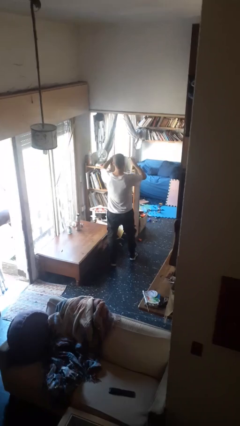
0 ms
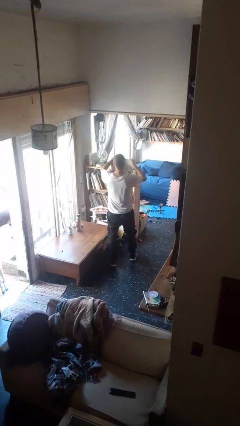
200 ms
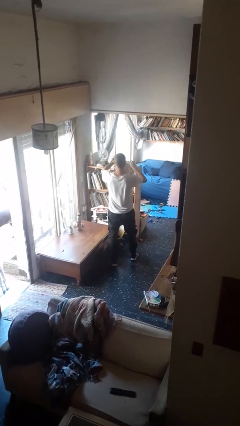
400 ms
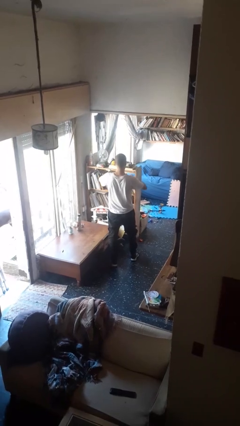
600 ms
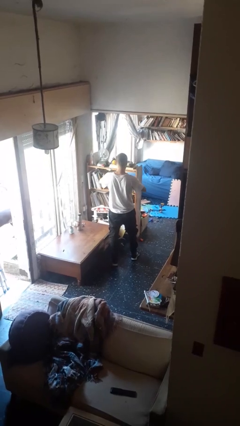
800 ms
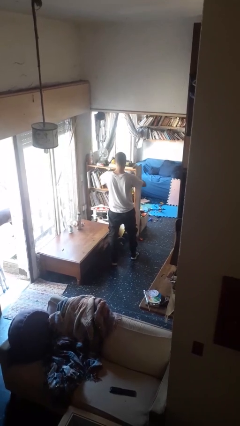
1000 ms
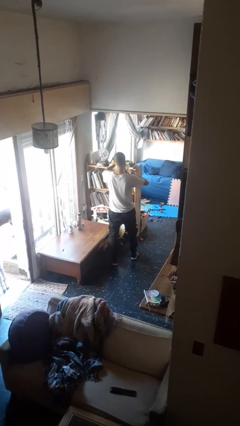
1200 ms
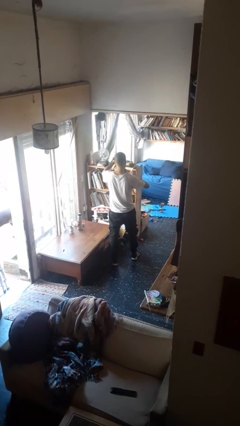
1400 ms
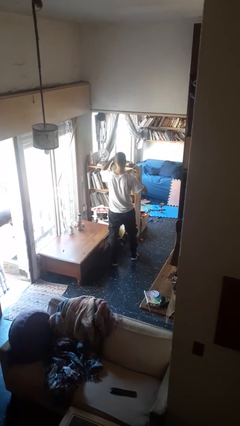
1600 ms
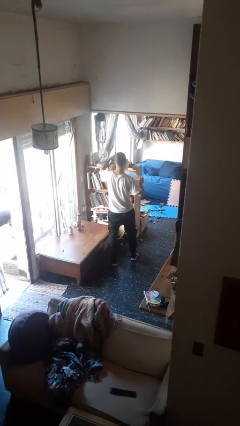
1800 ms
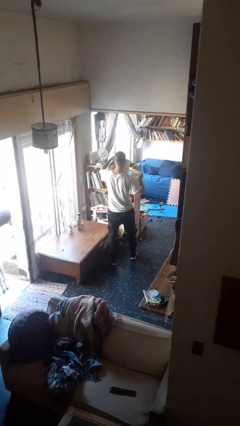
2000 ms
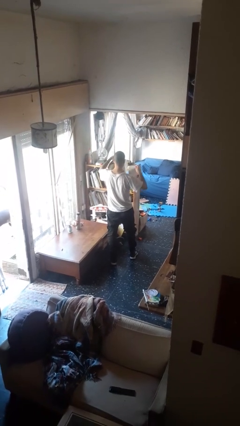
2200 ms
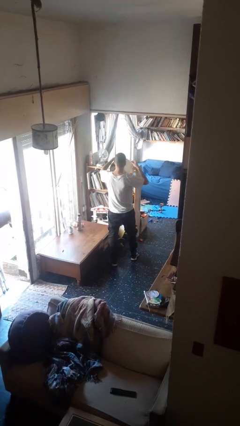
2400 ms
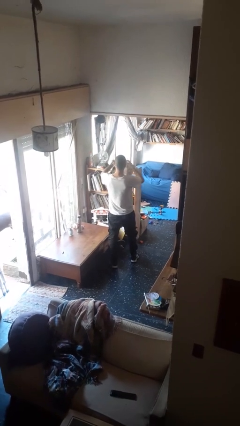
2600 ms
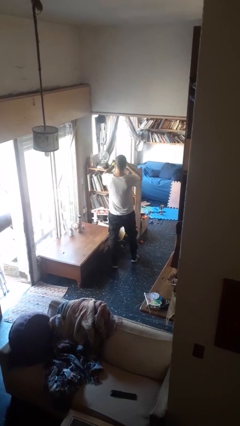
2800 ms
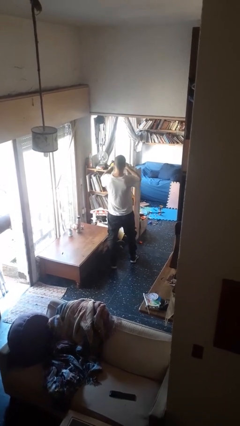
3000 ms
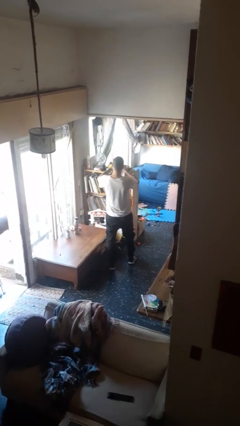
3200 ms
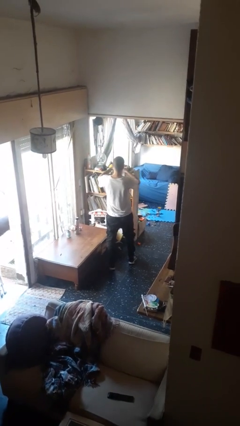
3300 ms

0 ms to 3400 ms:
person tears paper

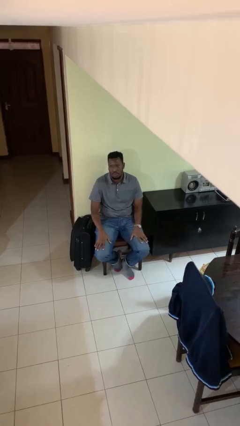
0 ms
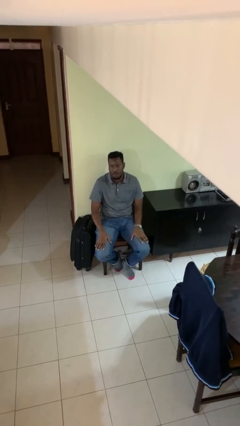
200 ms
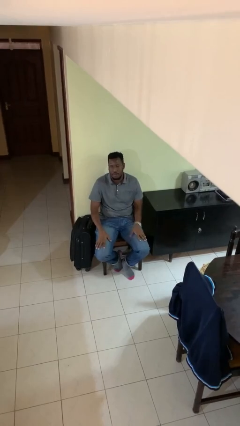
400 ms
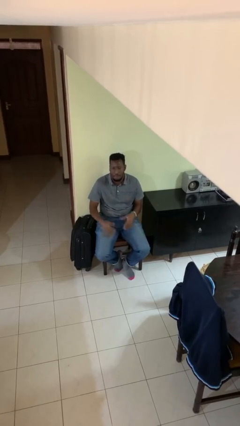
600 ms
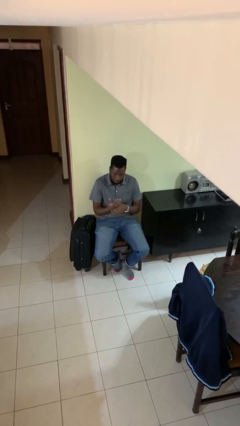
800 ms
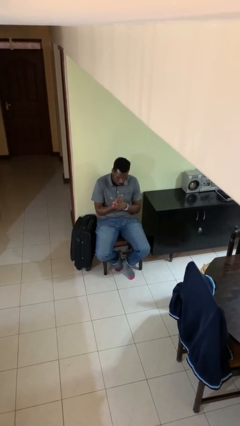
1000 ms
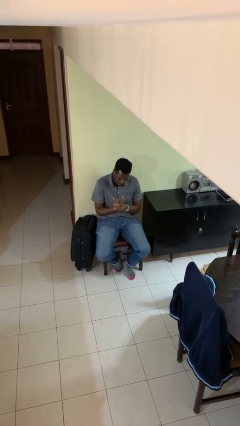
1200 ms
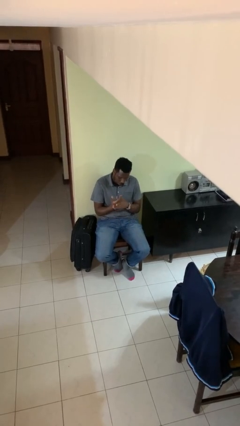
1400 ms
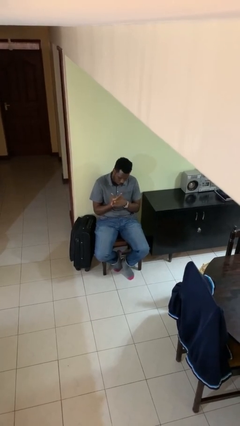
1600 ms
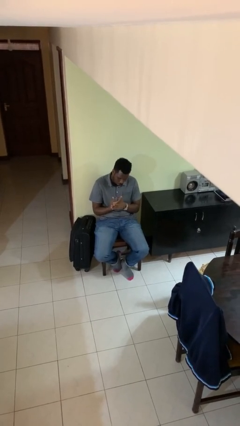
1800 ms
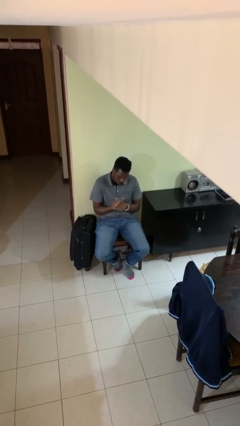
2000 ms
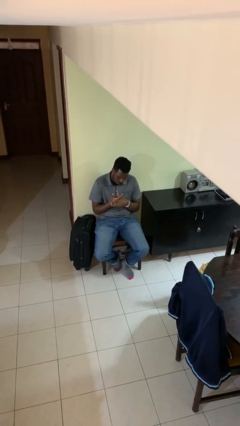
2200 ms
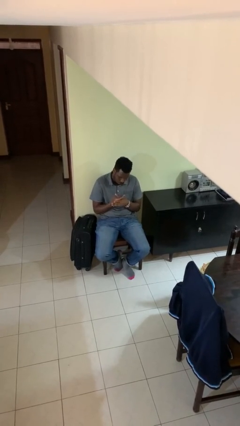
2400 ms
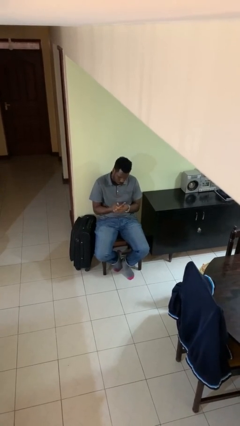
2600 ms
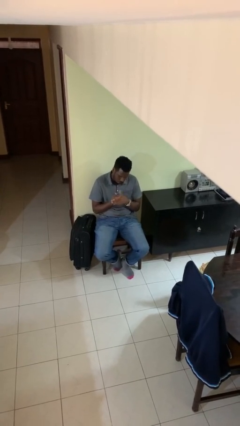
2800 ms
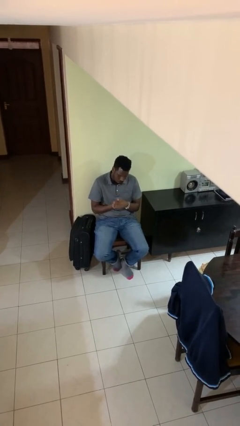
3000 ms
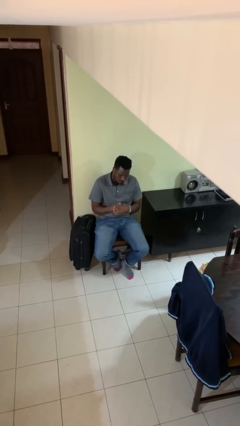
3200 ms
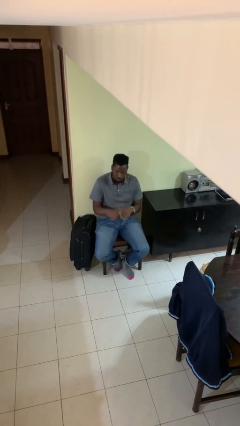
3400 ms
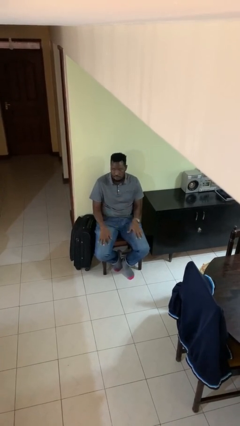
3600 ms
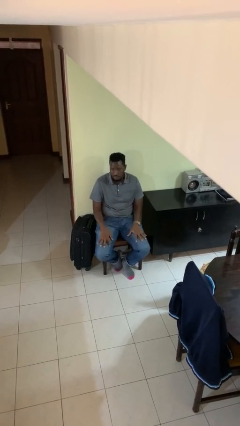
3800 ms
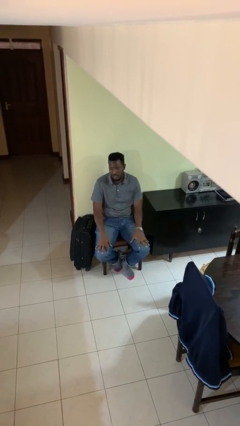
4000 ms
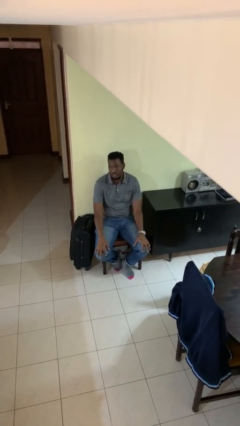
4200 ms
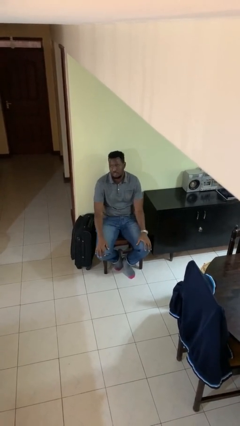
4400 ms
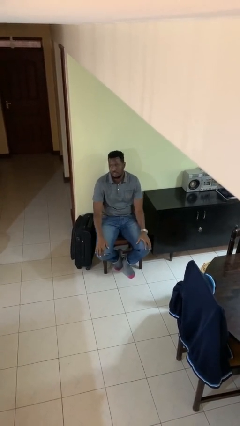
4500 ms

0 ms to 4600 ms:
person cracks knuckles

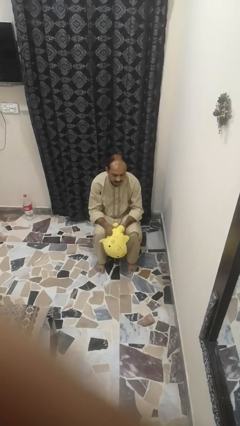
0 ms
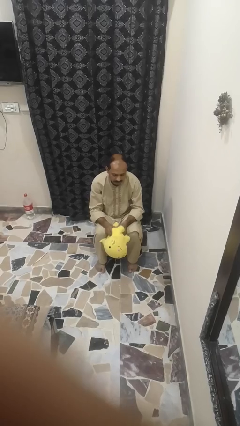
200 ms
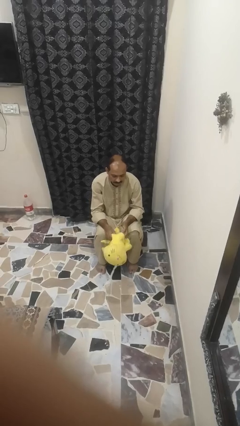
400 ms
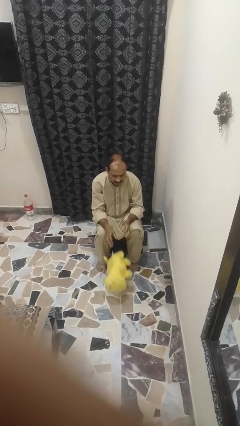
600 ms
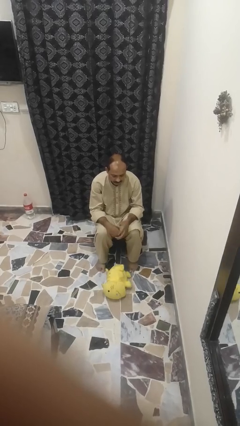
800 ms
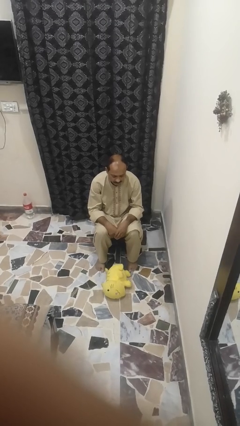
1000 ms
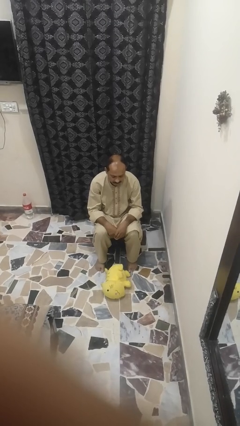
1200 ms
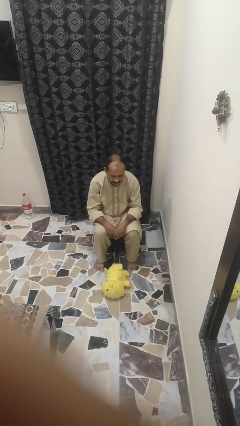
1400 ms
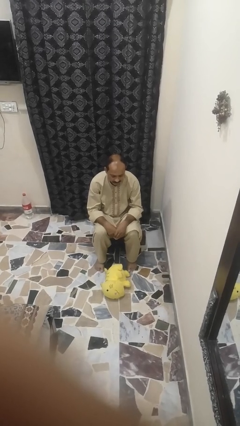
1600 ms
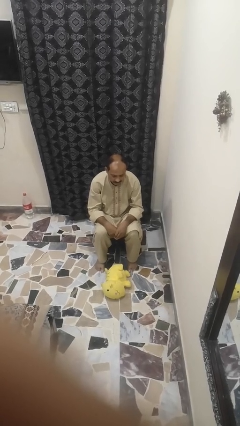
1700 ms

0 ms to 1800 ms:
person drops object

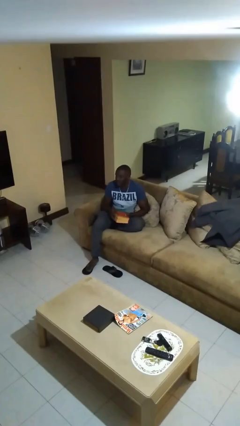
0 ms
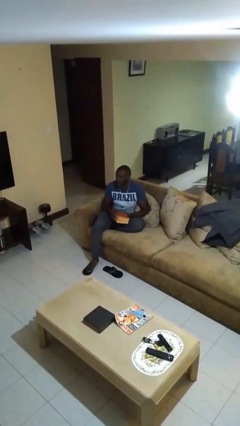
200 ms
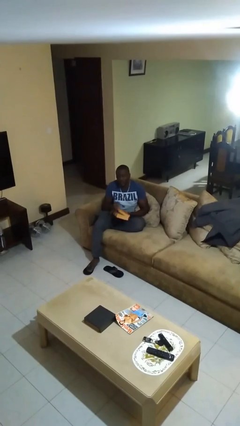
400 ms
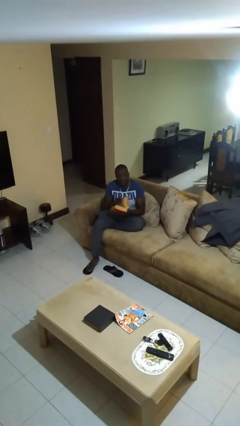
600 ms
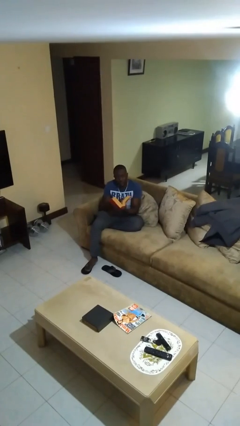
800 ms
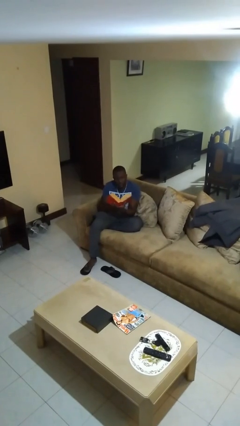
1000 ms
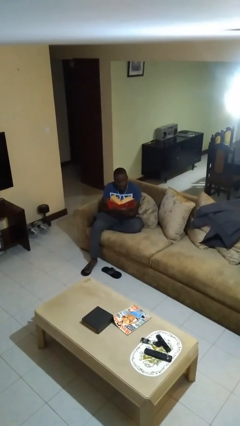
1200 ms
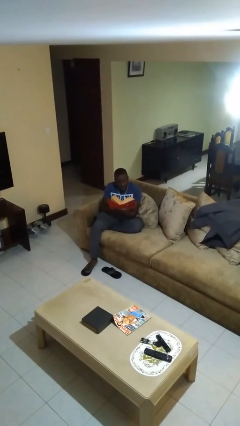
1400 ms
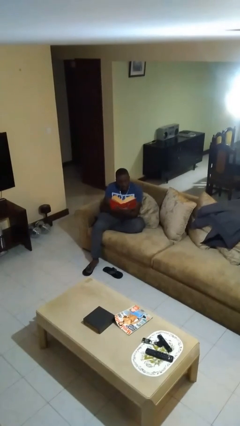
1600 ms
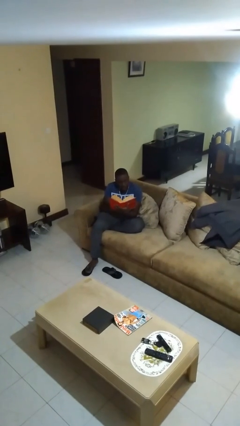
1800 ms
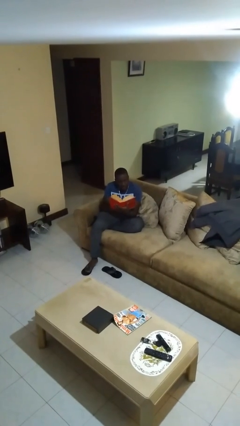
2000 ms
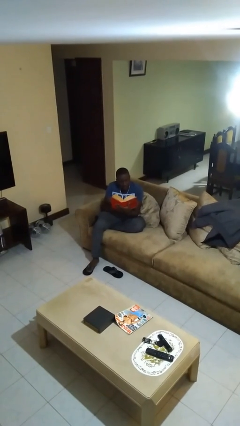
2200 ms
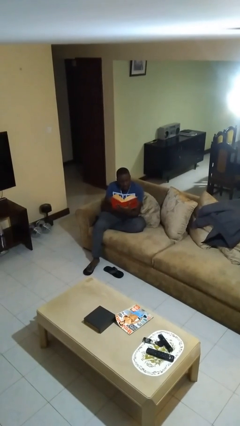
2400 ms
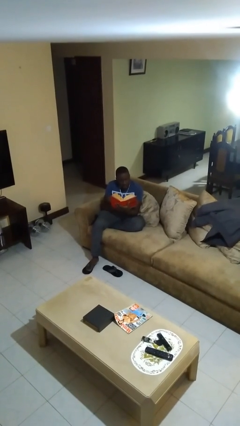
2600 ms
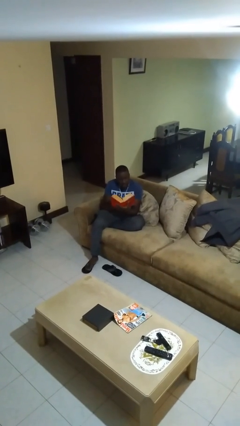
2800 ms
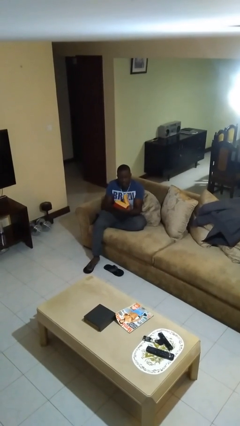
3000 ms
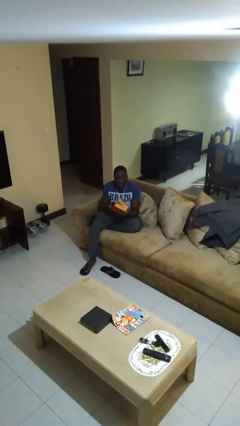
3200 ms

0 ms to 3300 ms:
person reads book

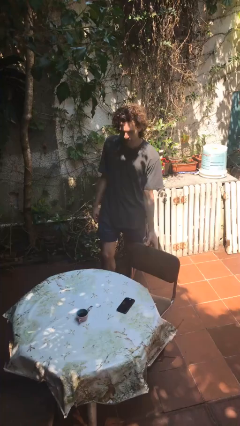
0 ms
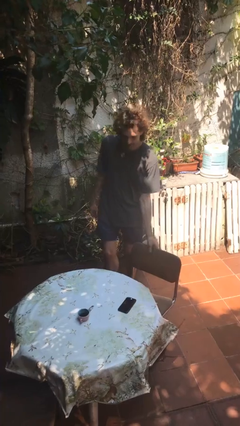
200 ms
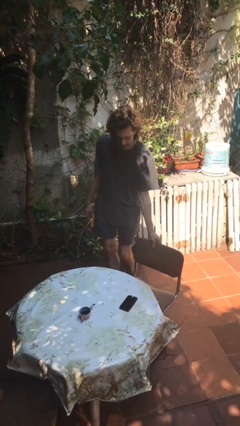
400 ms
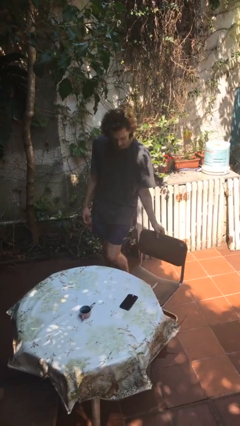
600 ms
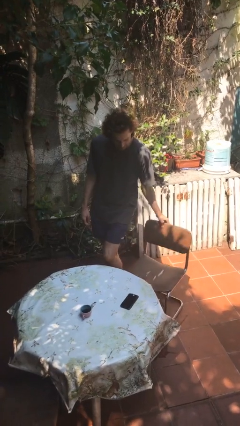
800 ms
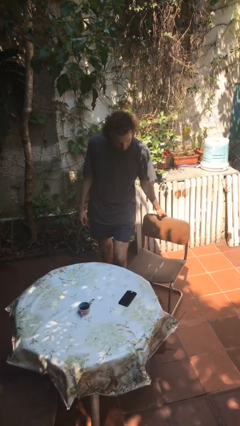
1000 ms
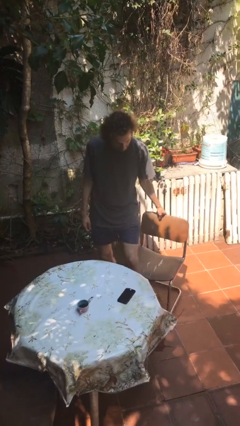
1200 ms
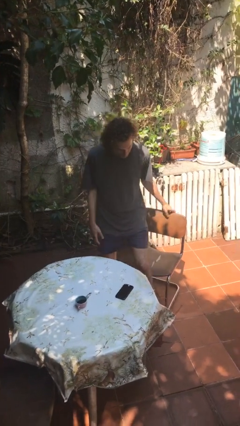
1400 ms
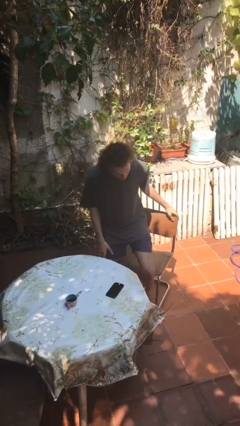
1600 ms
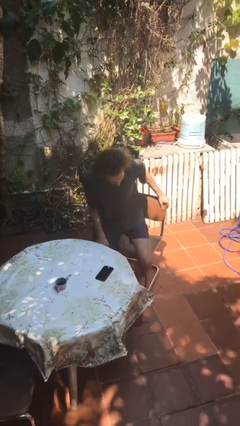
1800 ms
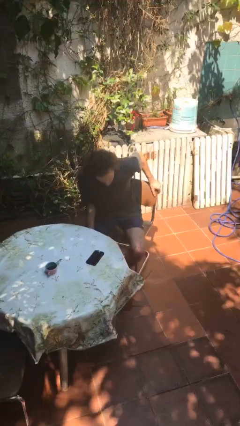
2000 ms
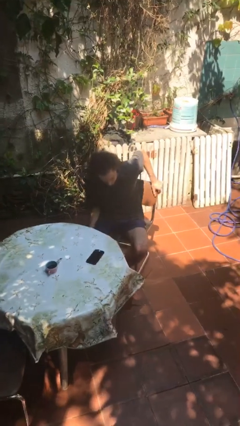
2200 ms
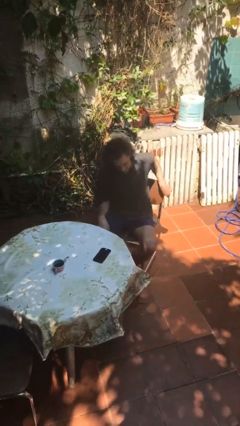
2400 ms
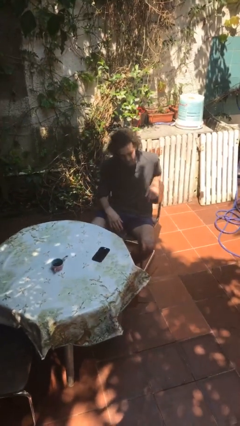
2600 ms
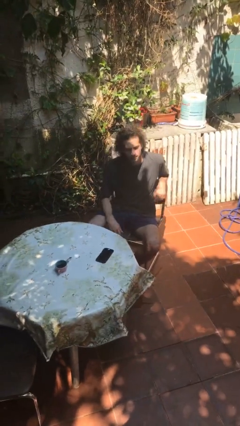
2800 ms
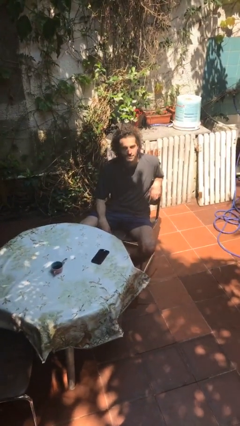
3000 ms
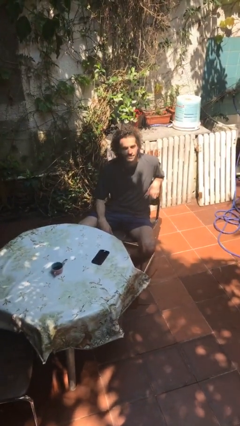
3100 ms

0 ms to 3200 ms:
person sits down

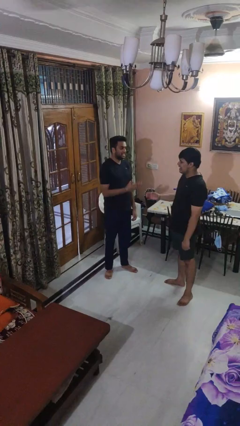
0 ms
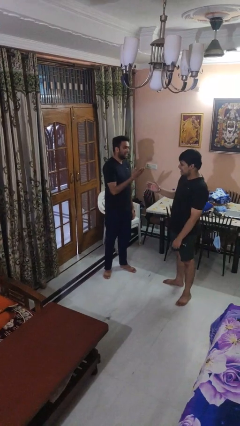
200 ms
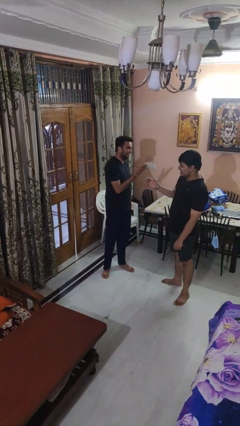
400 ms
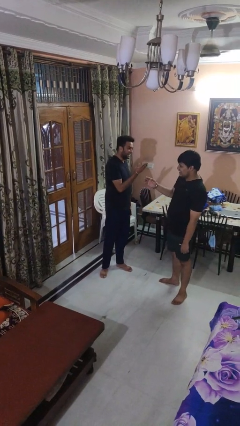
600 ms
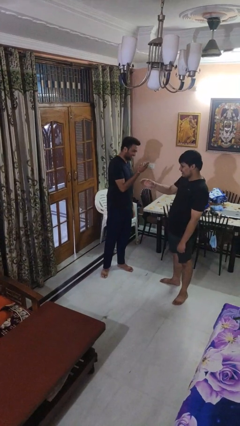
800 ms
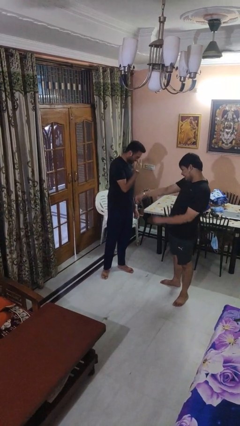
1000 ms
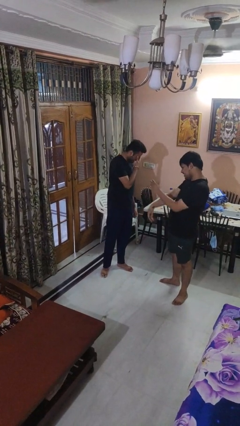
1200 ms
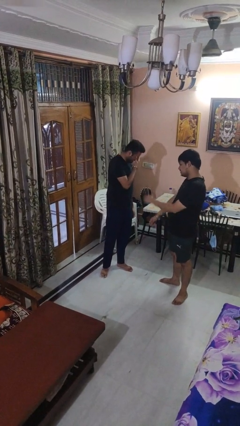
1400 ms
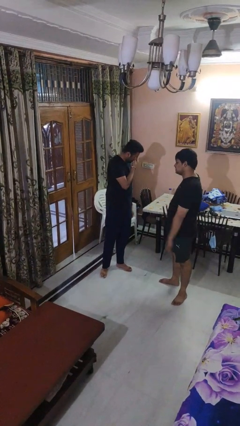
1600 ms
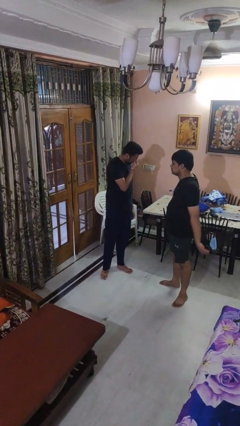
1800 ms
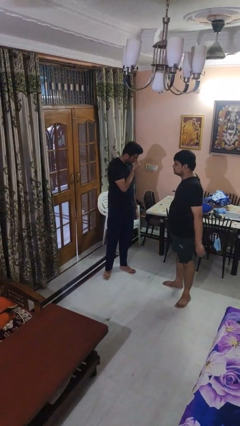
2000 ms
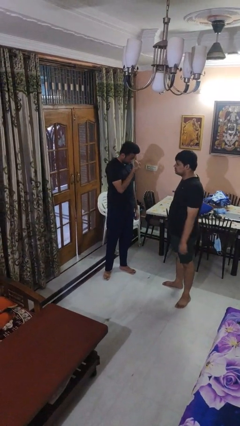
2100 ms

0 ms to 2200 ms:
person laughs with person
